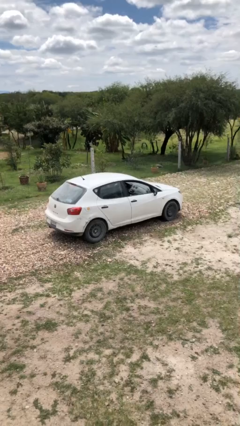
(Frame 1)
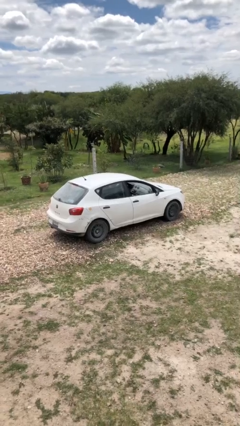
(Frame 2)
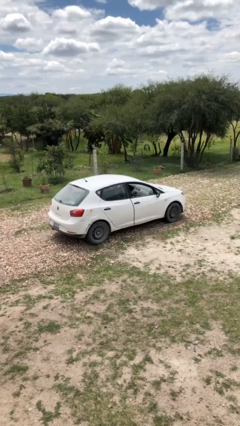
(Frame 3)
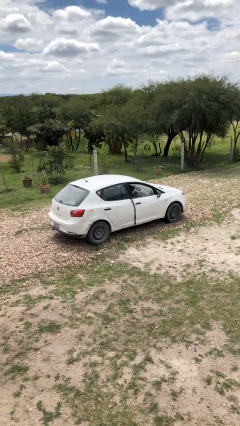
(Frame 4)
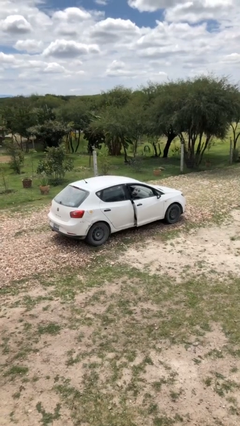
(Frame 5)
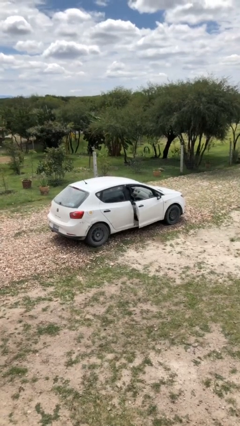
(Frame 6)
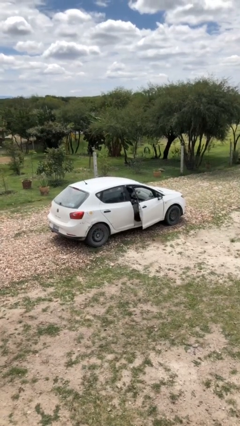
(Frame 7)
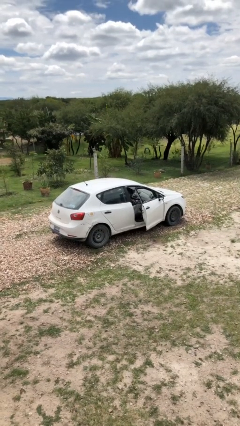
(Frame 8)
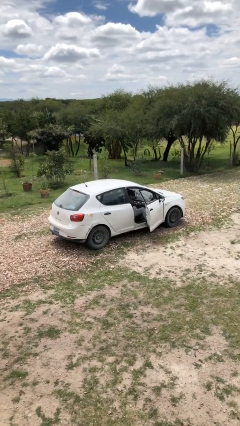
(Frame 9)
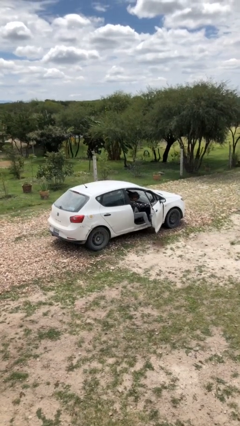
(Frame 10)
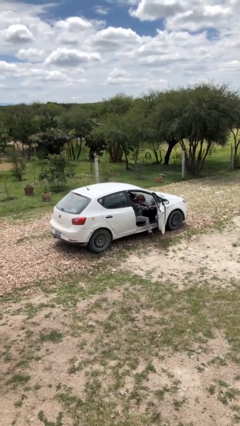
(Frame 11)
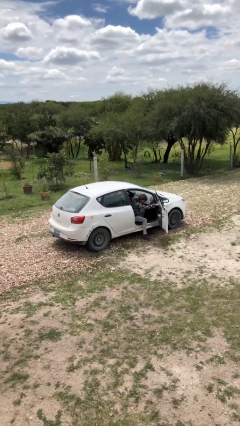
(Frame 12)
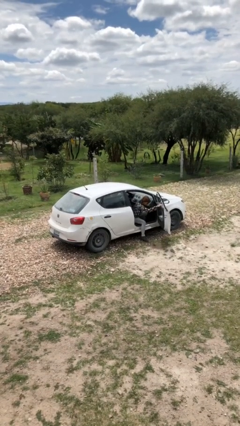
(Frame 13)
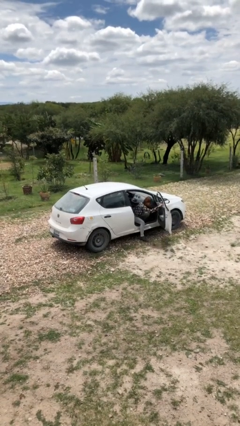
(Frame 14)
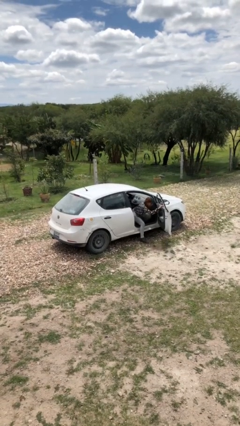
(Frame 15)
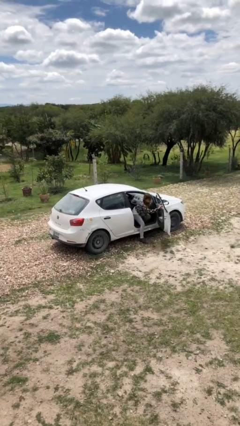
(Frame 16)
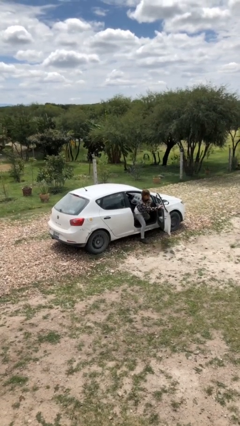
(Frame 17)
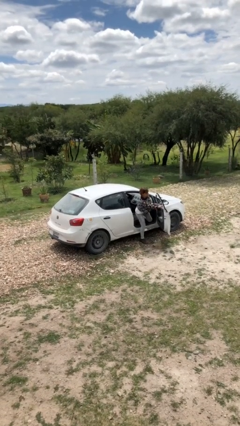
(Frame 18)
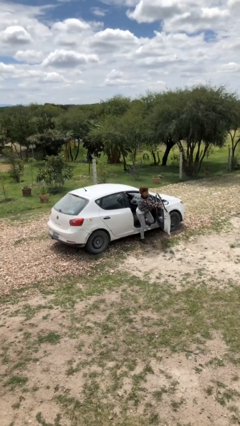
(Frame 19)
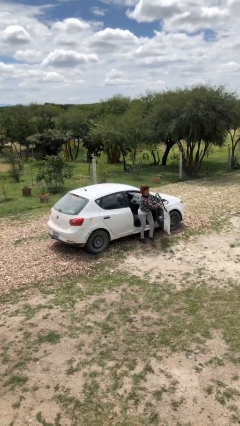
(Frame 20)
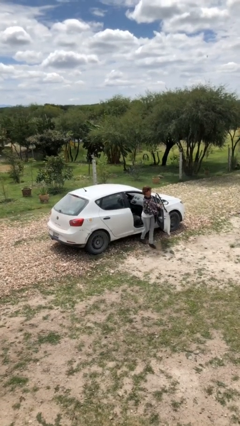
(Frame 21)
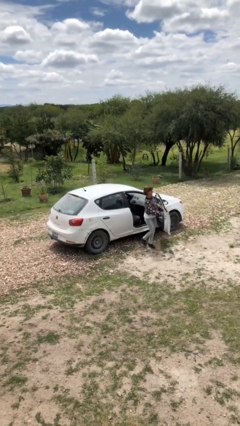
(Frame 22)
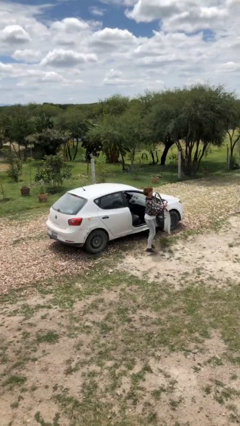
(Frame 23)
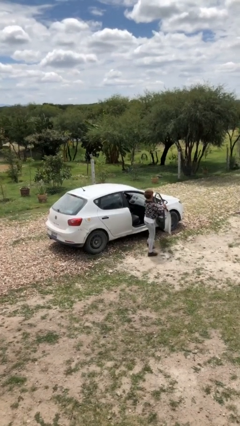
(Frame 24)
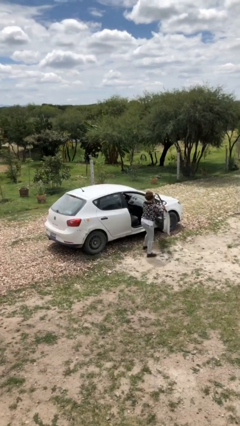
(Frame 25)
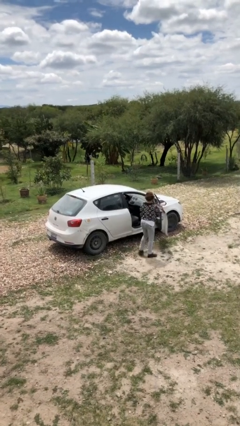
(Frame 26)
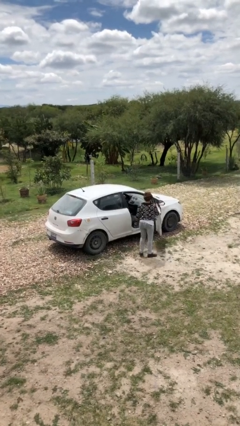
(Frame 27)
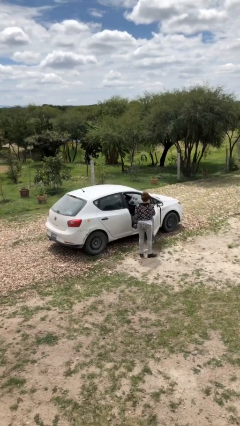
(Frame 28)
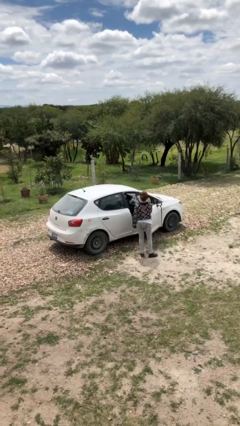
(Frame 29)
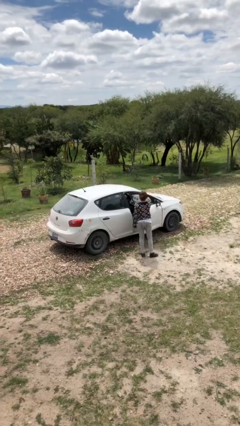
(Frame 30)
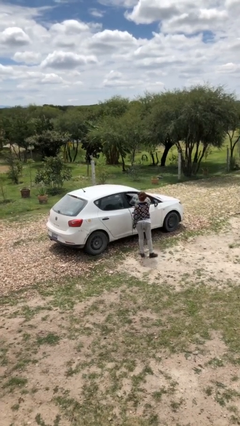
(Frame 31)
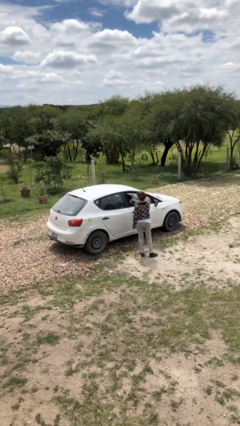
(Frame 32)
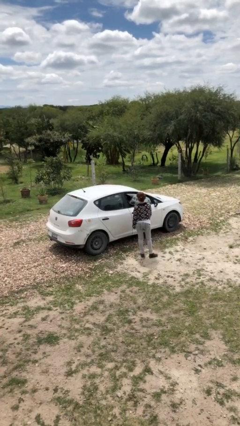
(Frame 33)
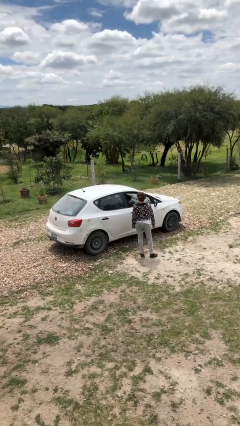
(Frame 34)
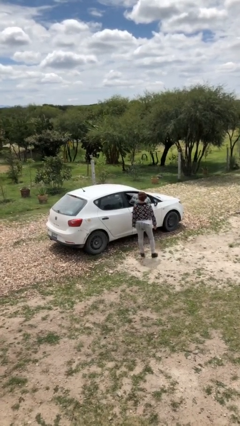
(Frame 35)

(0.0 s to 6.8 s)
car drops off person

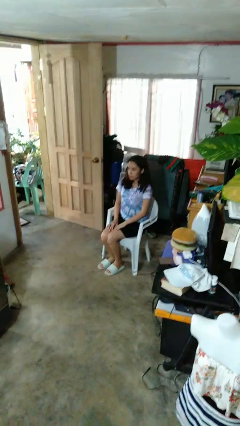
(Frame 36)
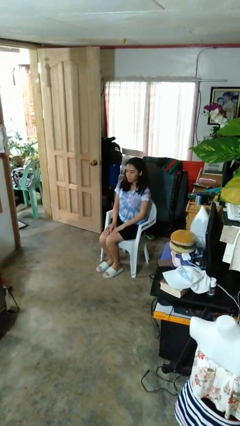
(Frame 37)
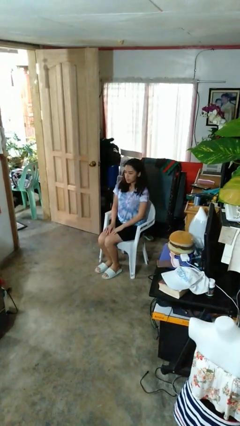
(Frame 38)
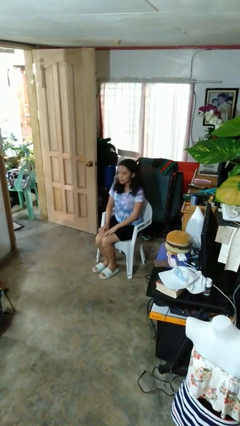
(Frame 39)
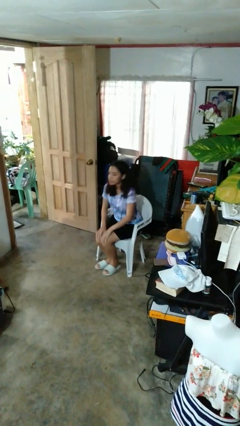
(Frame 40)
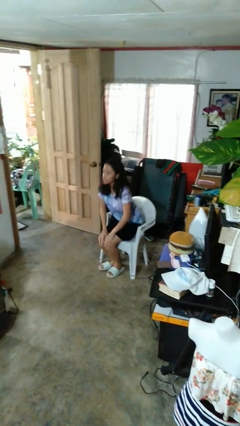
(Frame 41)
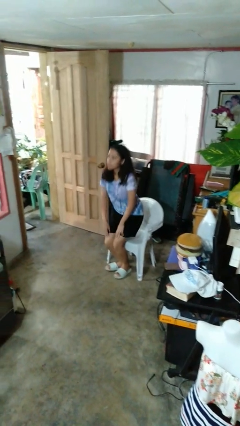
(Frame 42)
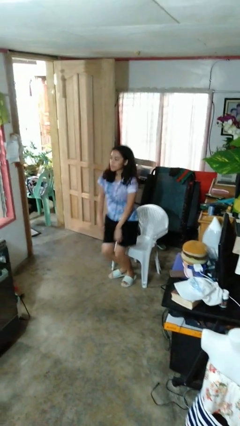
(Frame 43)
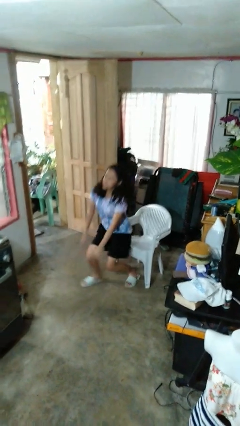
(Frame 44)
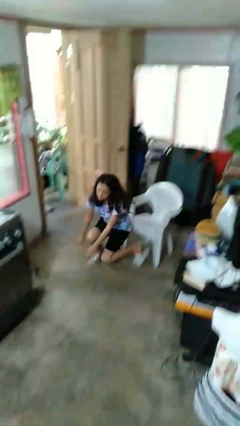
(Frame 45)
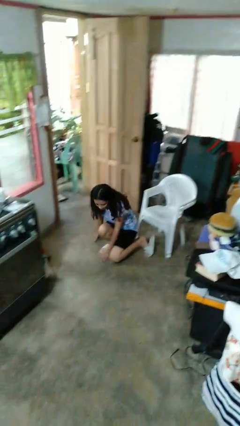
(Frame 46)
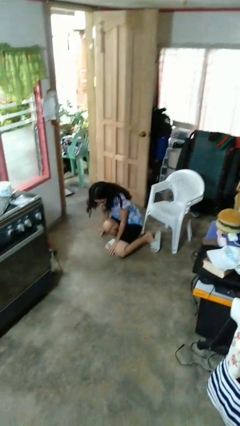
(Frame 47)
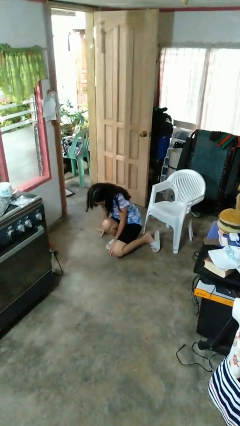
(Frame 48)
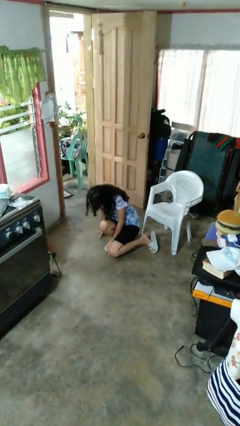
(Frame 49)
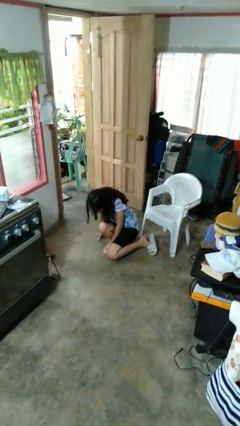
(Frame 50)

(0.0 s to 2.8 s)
person falls from chair

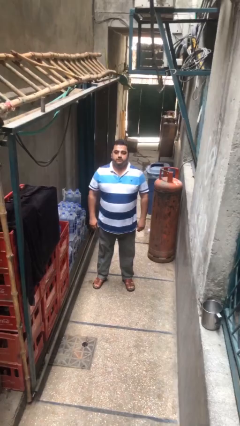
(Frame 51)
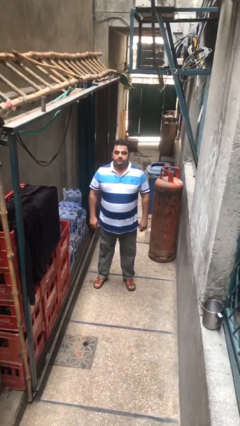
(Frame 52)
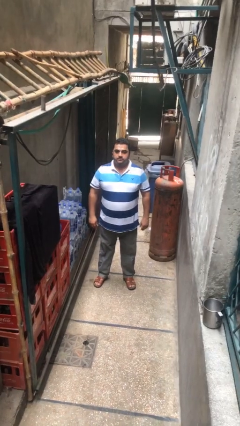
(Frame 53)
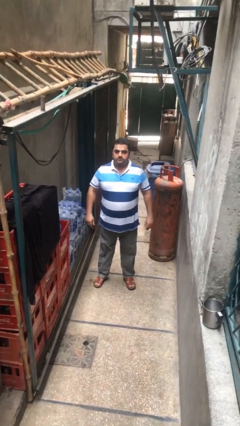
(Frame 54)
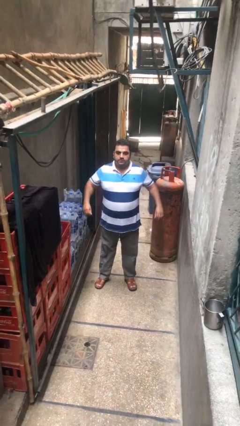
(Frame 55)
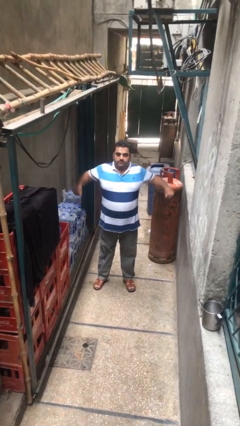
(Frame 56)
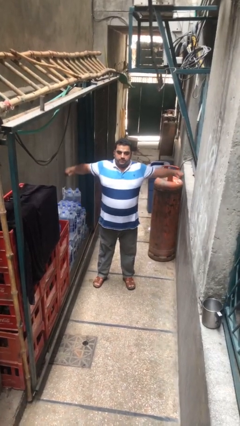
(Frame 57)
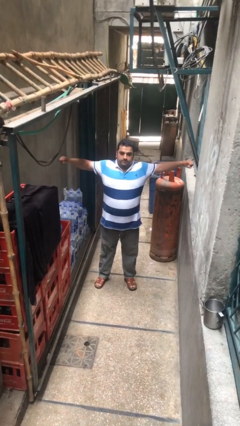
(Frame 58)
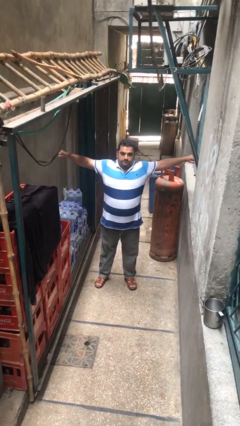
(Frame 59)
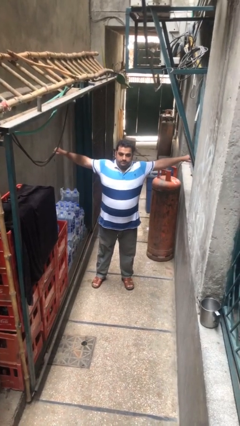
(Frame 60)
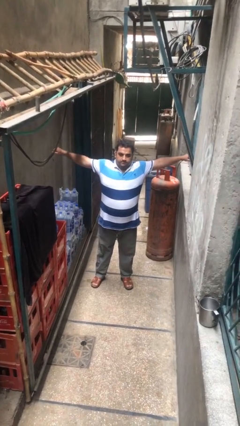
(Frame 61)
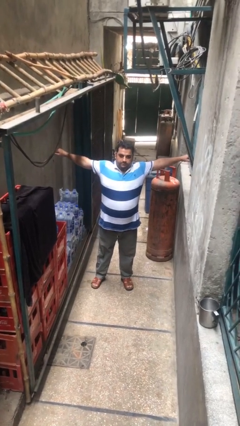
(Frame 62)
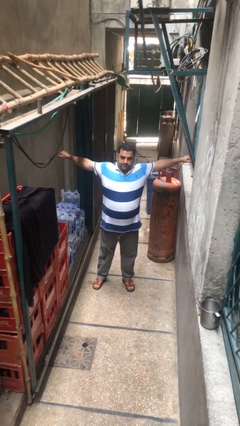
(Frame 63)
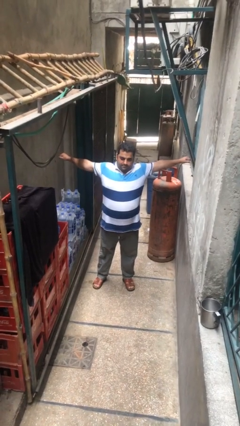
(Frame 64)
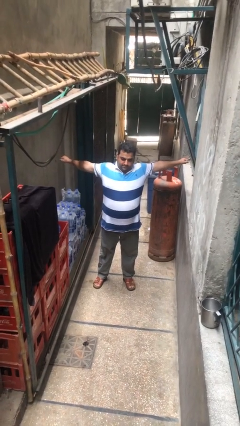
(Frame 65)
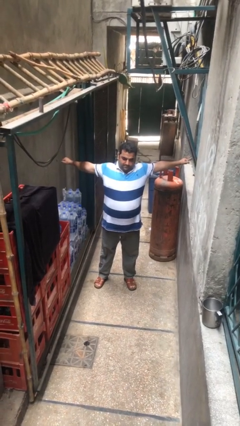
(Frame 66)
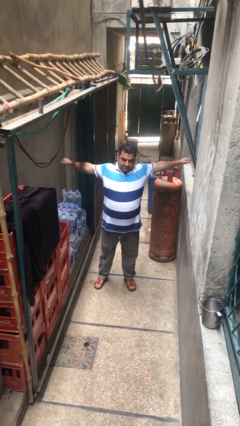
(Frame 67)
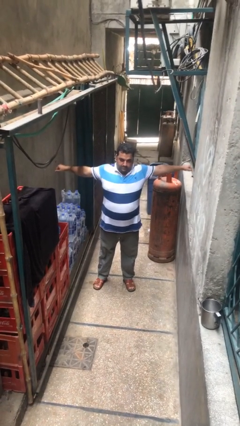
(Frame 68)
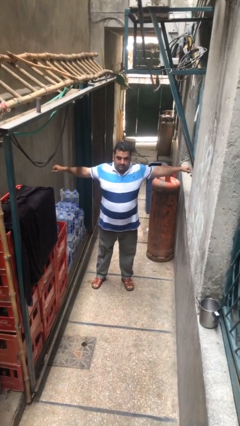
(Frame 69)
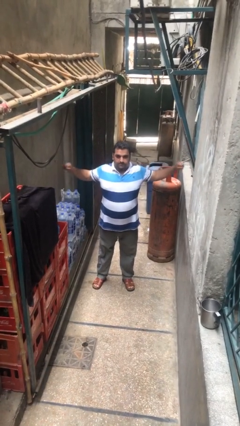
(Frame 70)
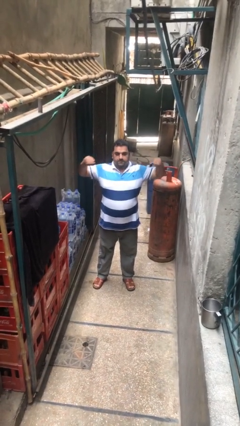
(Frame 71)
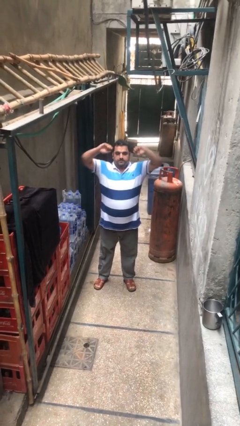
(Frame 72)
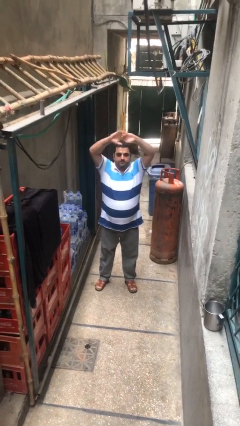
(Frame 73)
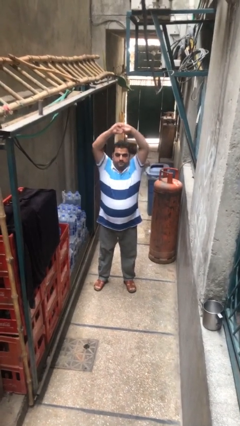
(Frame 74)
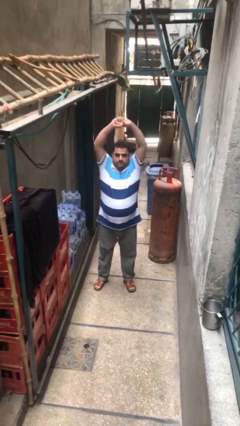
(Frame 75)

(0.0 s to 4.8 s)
person stretches arms to side

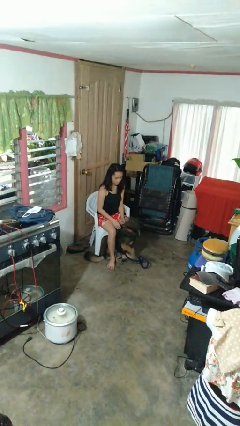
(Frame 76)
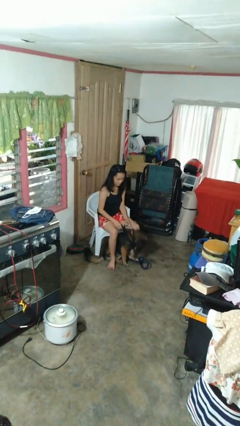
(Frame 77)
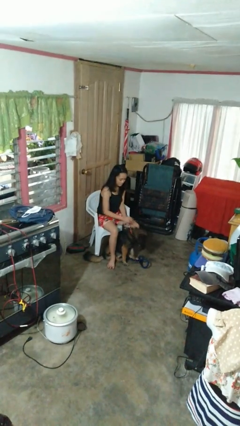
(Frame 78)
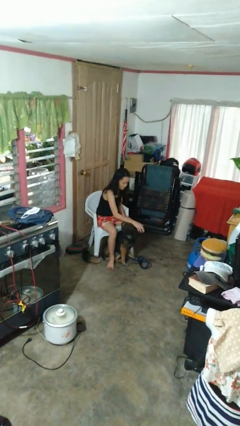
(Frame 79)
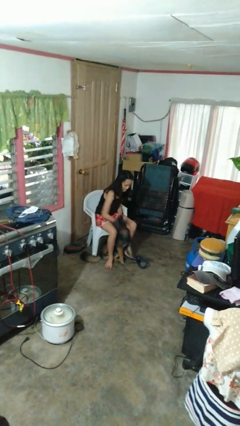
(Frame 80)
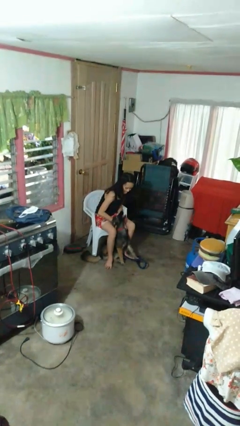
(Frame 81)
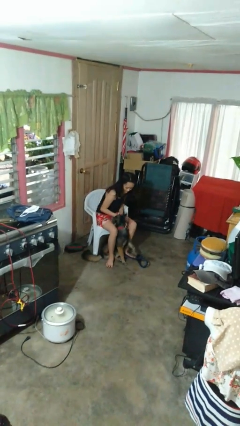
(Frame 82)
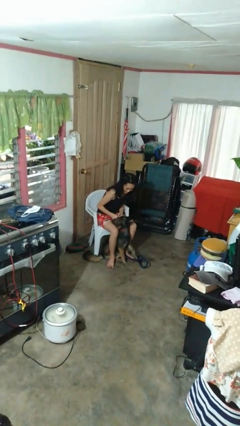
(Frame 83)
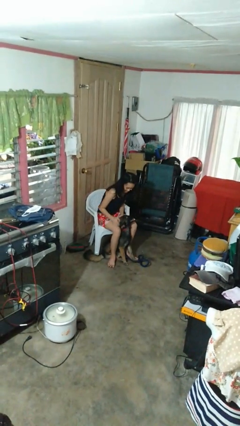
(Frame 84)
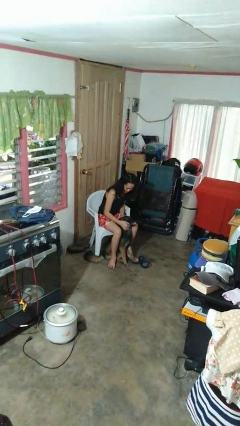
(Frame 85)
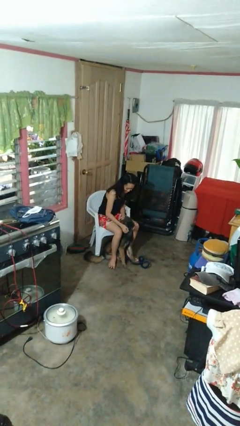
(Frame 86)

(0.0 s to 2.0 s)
person pets dog

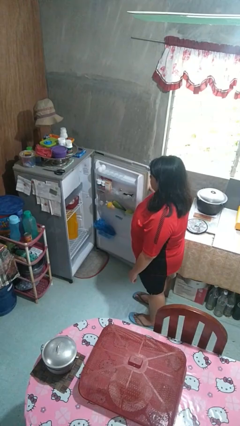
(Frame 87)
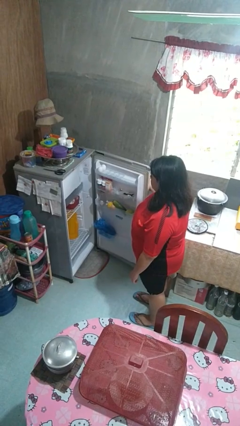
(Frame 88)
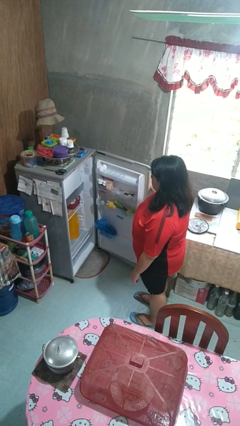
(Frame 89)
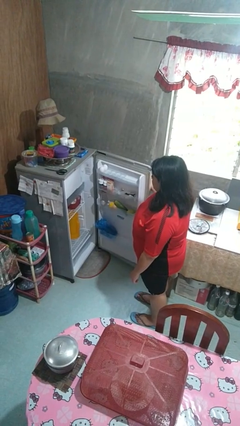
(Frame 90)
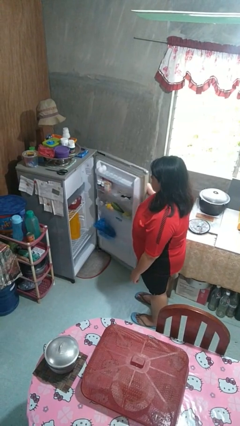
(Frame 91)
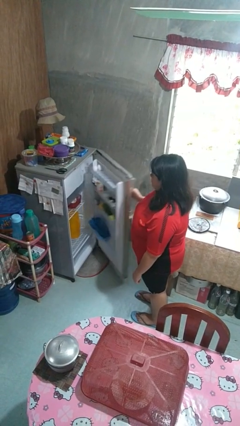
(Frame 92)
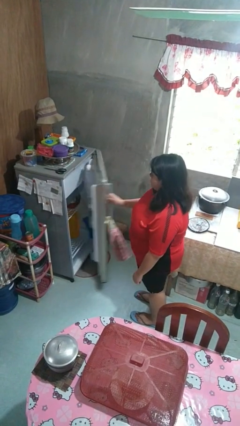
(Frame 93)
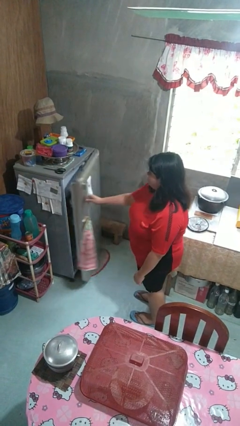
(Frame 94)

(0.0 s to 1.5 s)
person closes refrigerator
